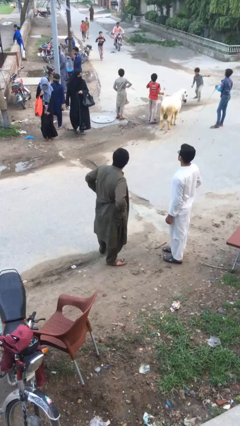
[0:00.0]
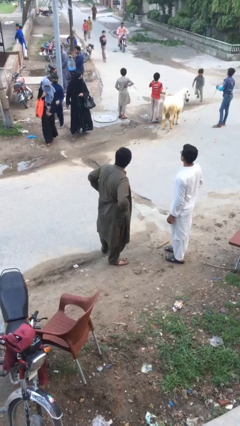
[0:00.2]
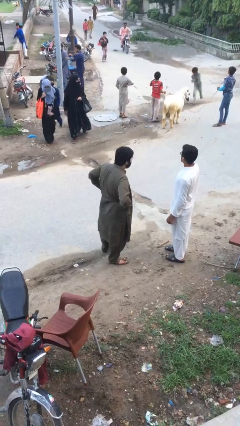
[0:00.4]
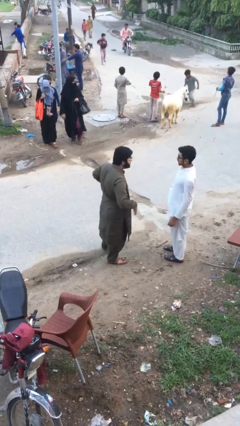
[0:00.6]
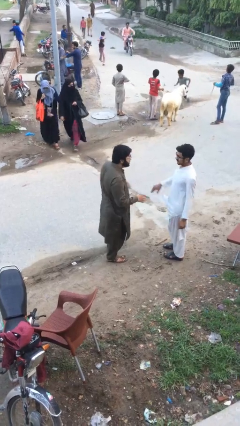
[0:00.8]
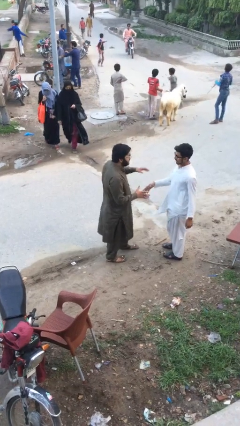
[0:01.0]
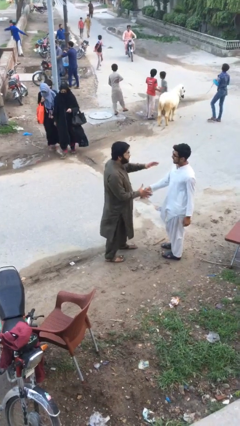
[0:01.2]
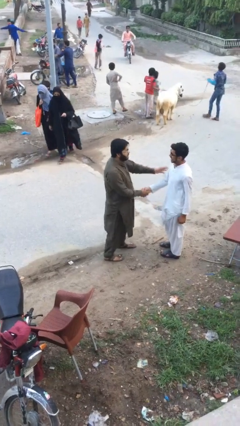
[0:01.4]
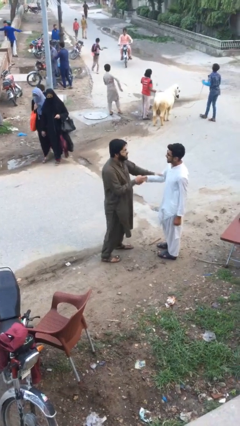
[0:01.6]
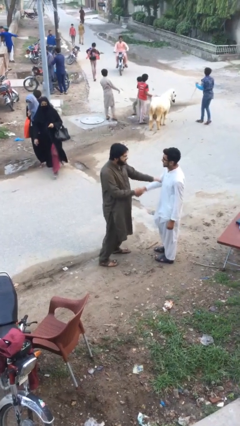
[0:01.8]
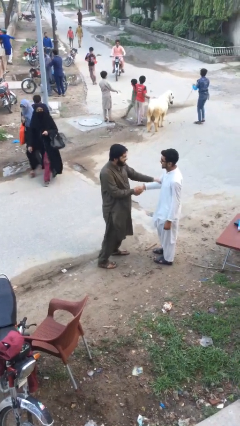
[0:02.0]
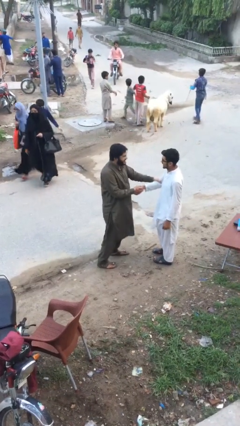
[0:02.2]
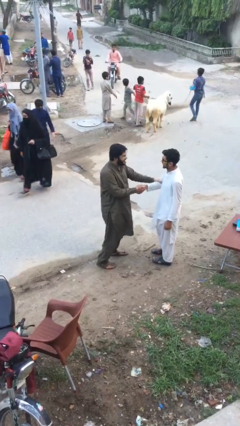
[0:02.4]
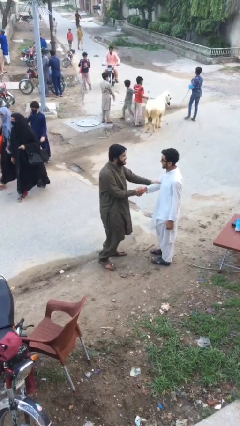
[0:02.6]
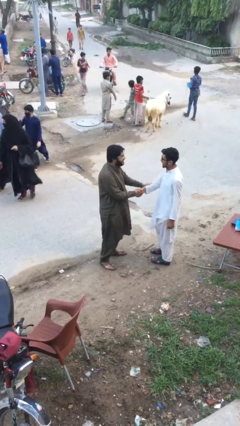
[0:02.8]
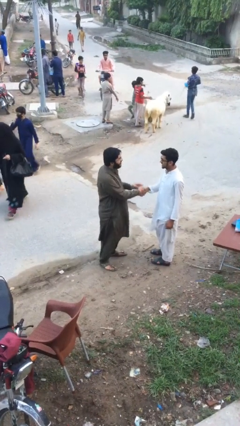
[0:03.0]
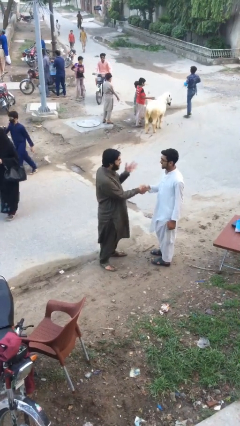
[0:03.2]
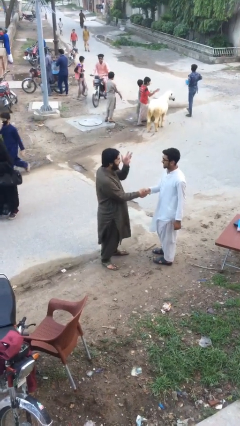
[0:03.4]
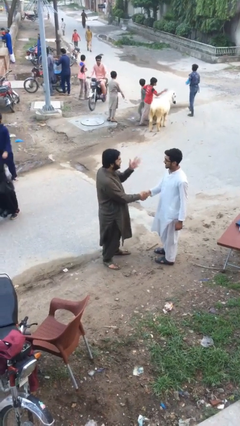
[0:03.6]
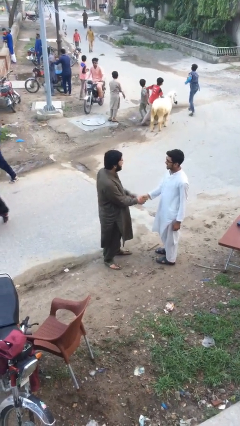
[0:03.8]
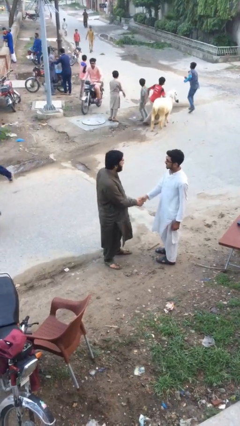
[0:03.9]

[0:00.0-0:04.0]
person shakes hand

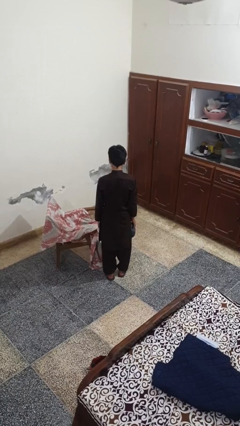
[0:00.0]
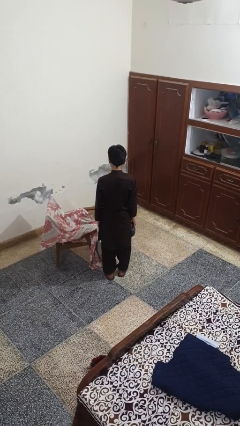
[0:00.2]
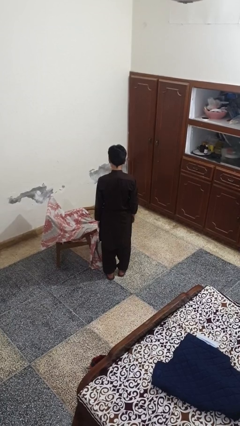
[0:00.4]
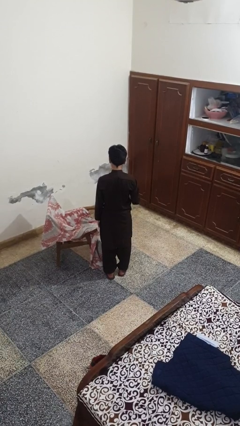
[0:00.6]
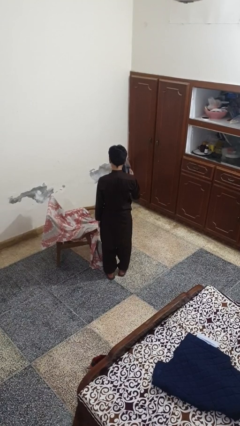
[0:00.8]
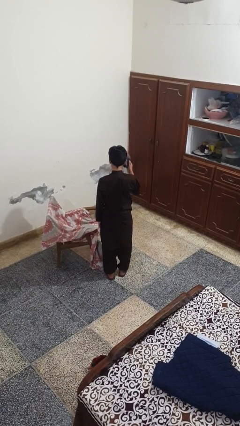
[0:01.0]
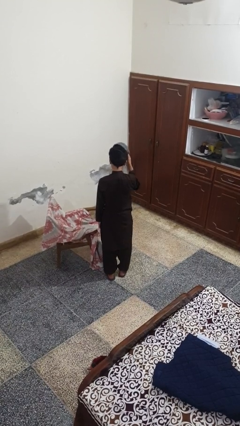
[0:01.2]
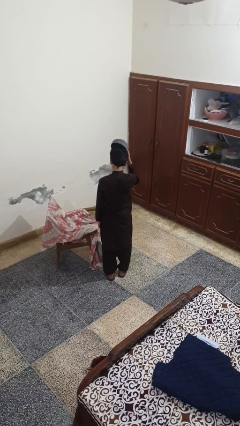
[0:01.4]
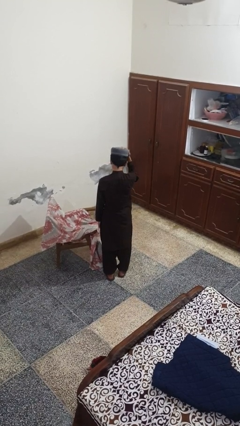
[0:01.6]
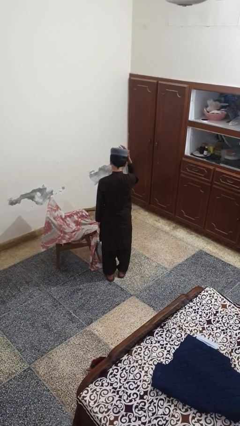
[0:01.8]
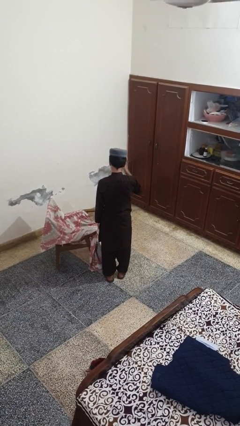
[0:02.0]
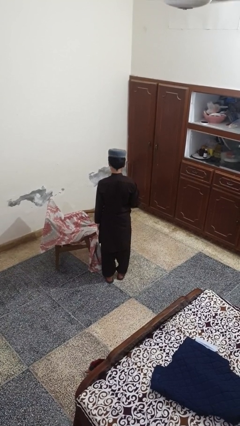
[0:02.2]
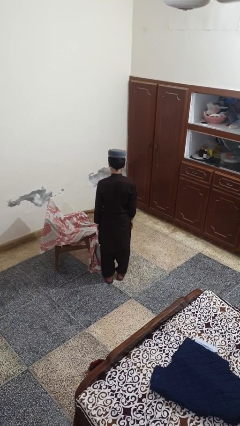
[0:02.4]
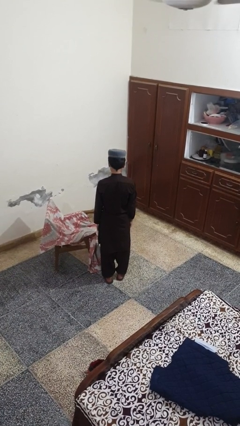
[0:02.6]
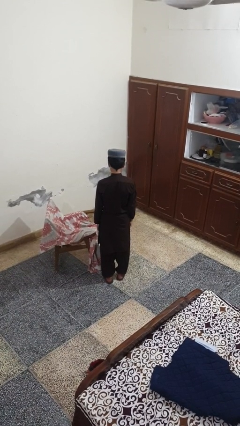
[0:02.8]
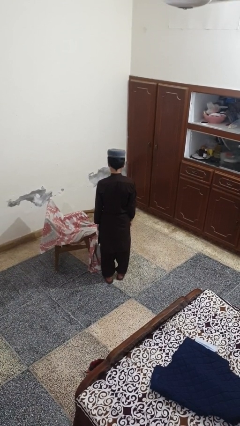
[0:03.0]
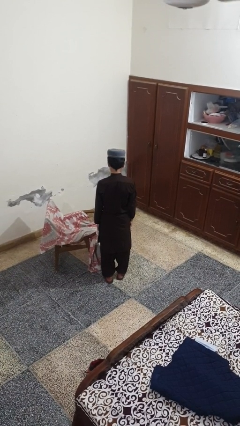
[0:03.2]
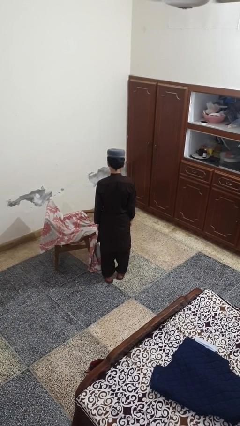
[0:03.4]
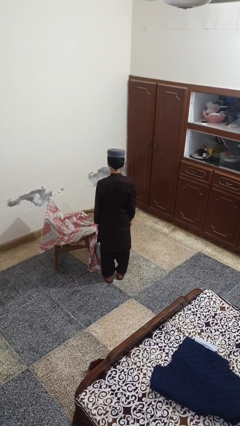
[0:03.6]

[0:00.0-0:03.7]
person puts on hat

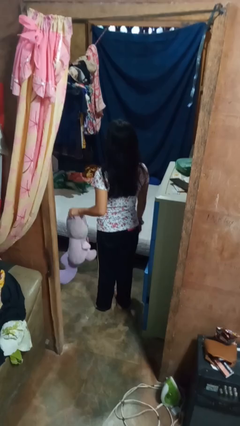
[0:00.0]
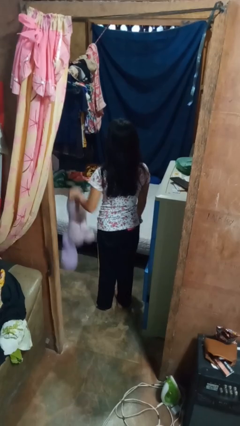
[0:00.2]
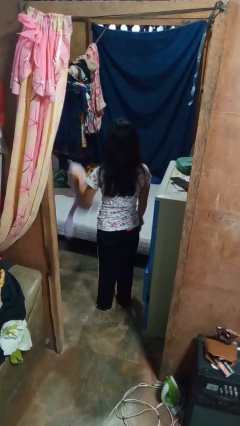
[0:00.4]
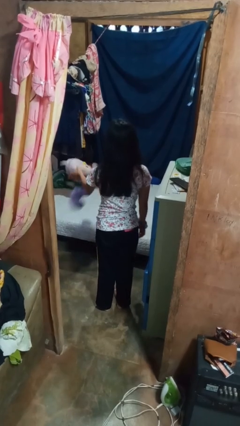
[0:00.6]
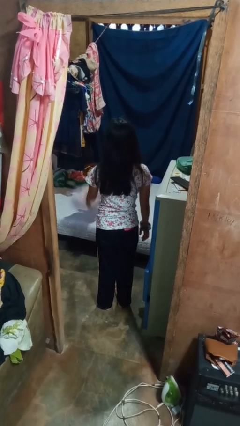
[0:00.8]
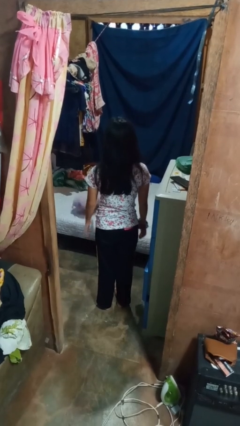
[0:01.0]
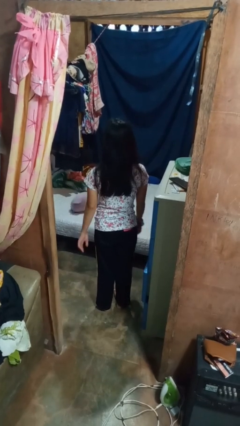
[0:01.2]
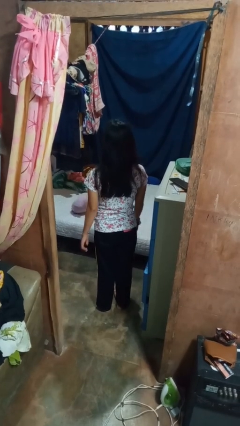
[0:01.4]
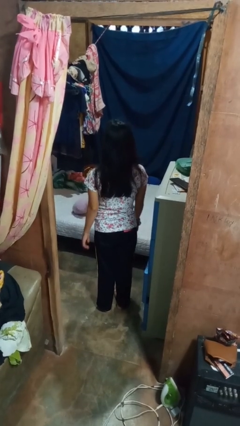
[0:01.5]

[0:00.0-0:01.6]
person throws object on bed

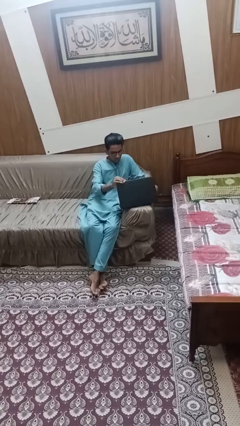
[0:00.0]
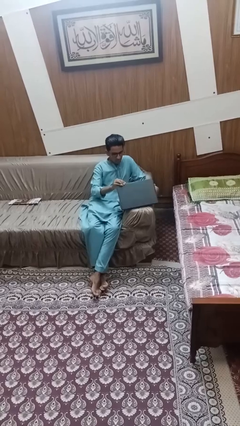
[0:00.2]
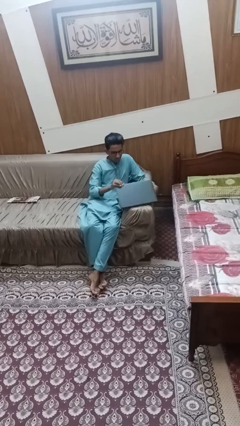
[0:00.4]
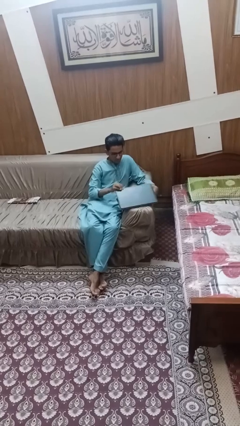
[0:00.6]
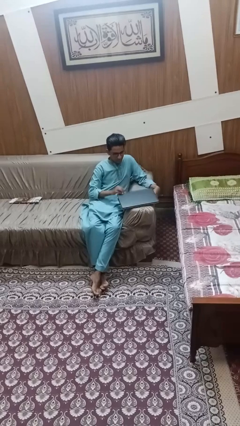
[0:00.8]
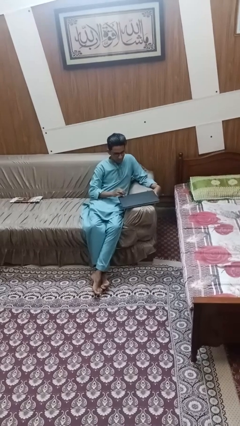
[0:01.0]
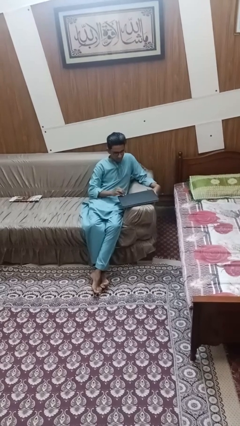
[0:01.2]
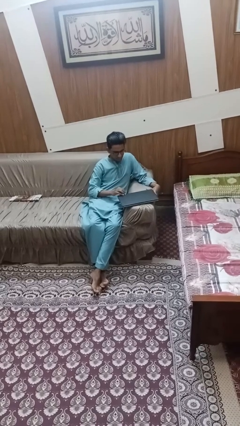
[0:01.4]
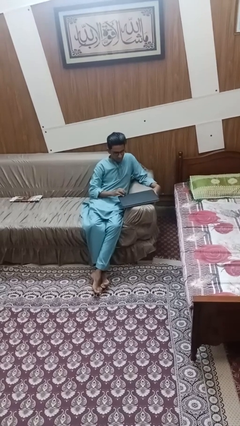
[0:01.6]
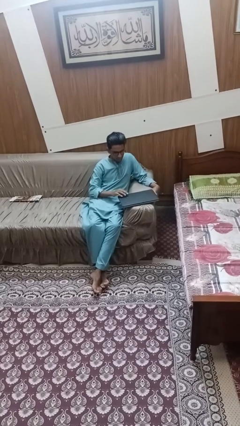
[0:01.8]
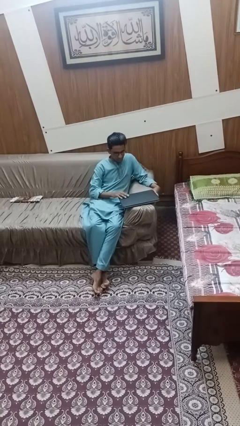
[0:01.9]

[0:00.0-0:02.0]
person closes laptop

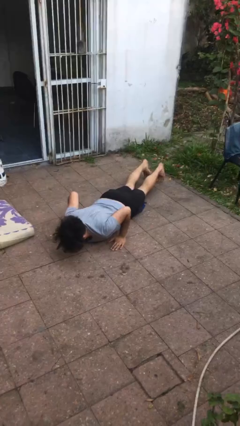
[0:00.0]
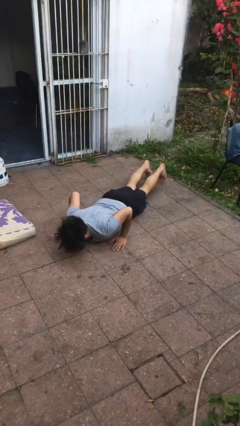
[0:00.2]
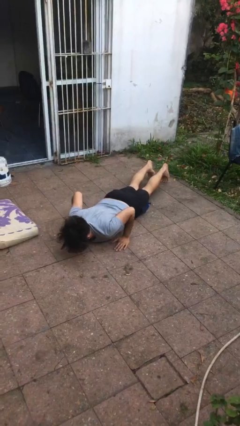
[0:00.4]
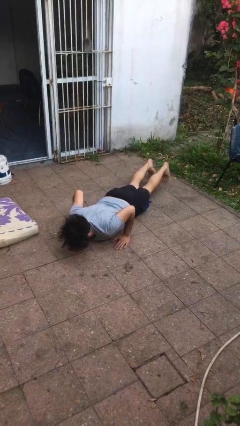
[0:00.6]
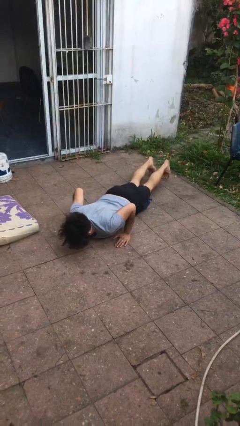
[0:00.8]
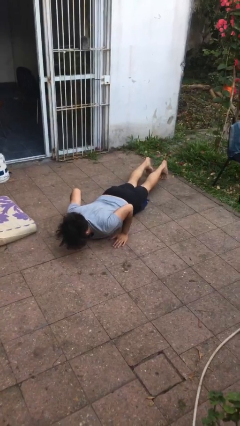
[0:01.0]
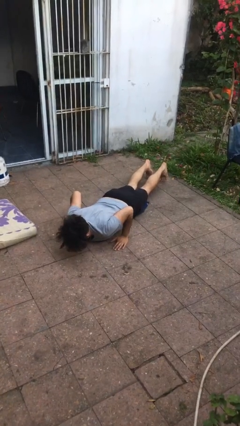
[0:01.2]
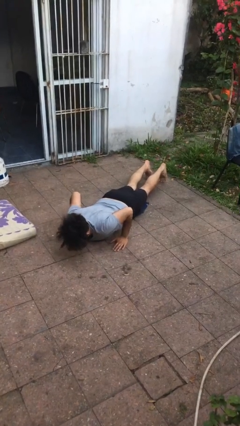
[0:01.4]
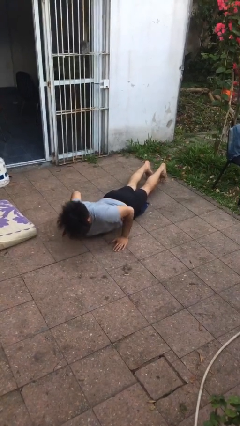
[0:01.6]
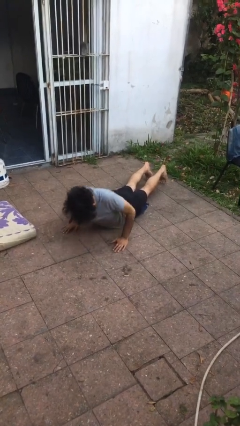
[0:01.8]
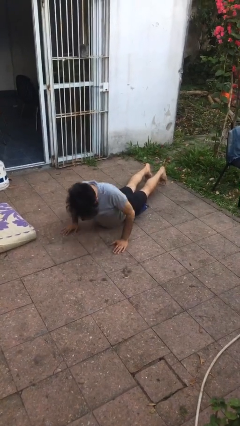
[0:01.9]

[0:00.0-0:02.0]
person exercises with pushup

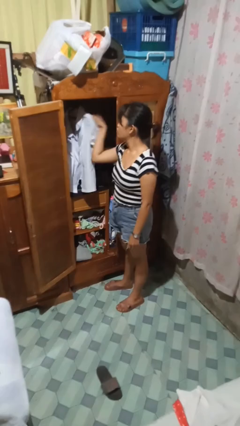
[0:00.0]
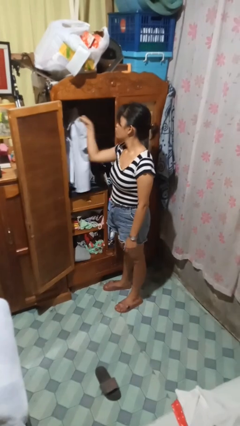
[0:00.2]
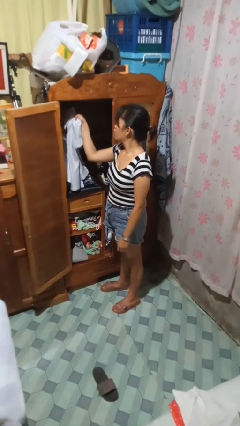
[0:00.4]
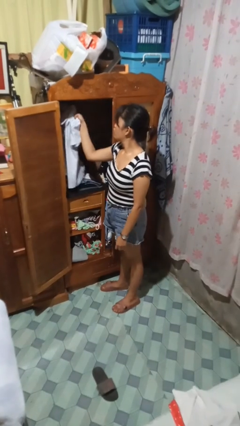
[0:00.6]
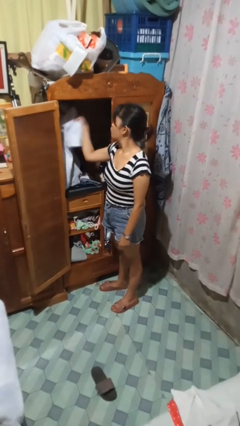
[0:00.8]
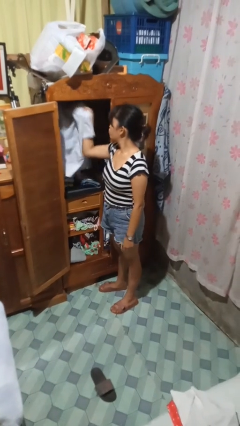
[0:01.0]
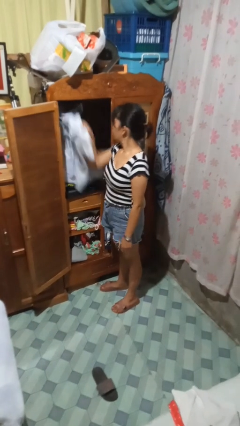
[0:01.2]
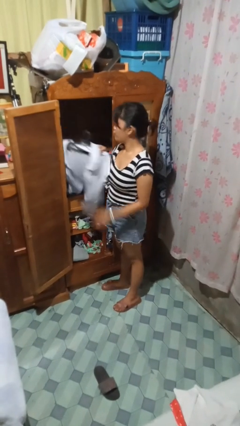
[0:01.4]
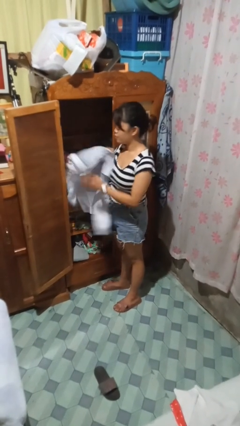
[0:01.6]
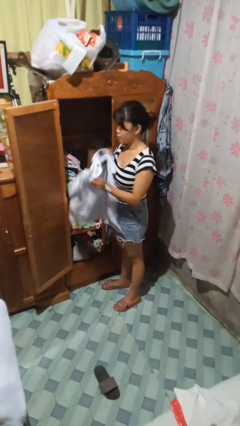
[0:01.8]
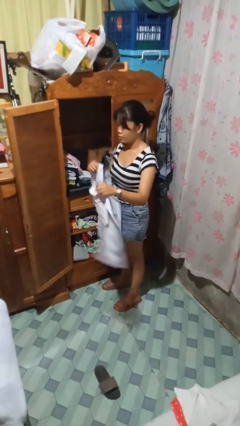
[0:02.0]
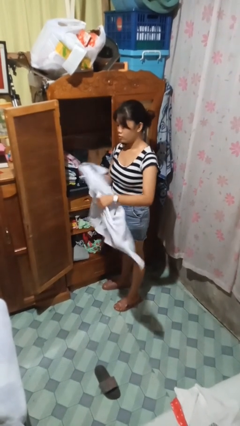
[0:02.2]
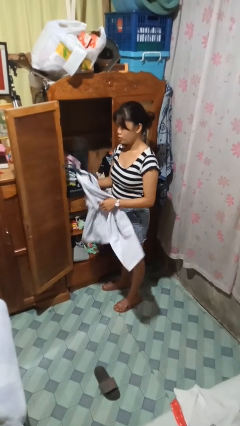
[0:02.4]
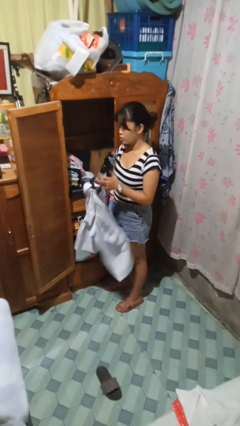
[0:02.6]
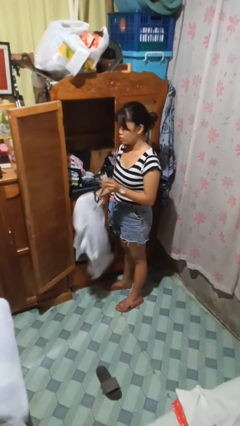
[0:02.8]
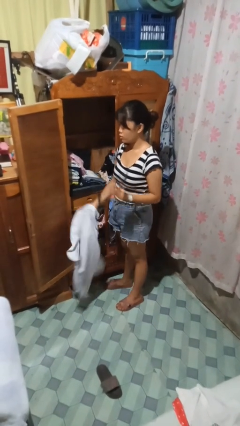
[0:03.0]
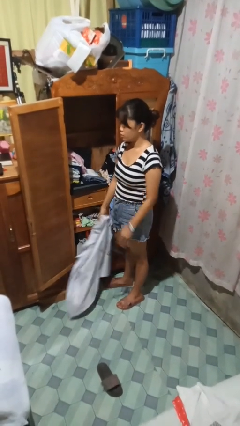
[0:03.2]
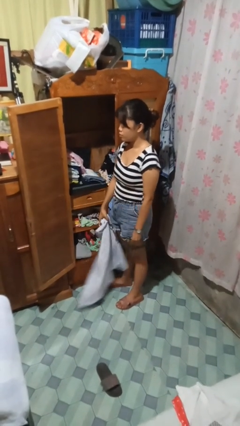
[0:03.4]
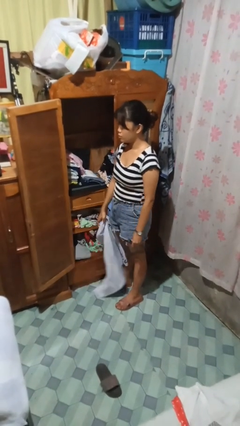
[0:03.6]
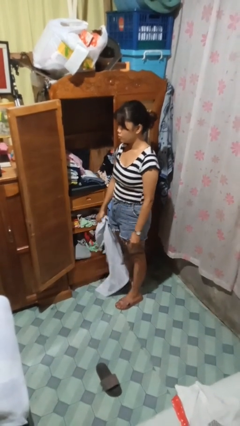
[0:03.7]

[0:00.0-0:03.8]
person takes clothes from closet

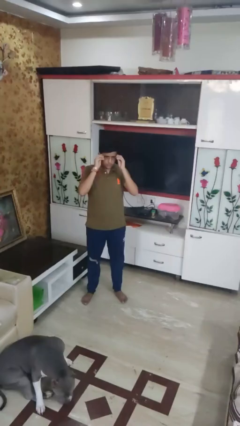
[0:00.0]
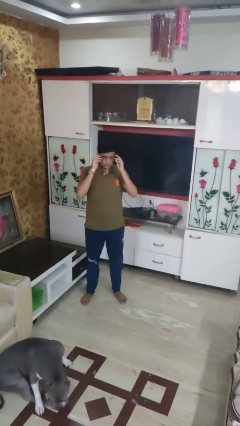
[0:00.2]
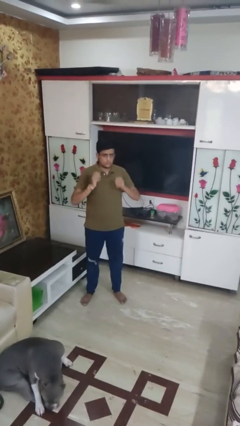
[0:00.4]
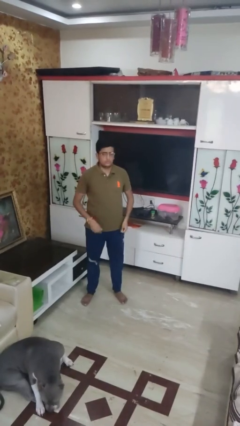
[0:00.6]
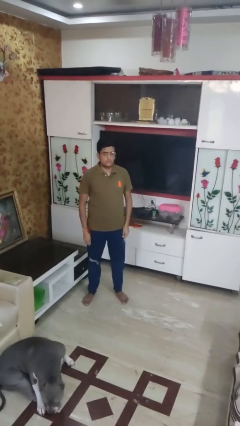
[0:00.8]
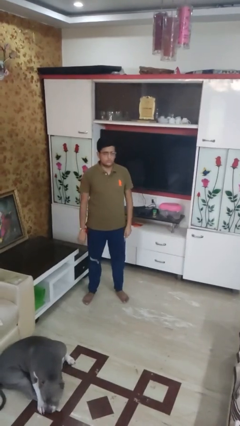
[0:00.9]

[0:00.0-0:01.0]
person puts on glasses
